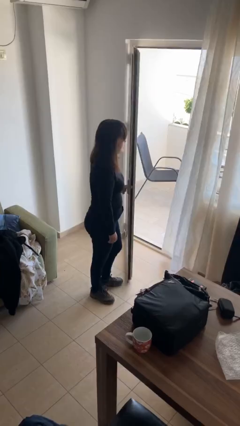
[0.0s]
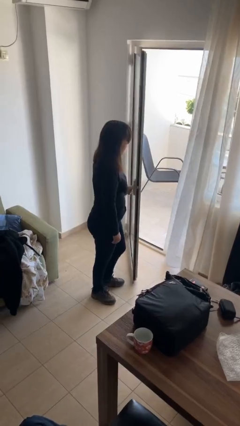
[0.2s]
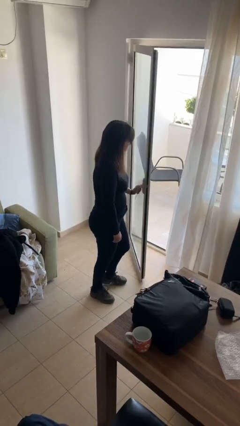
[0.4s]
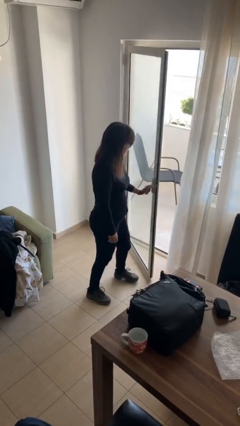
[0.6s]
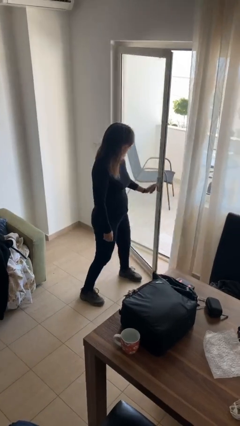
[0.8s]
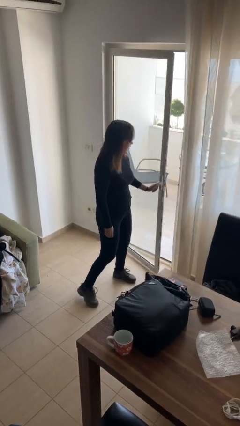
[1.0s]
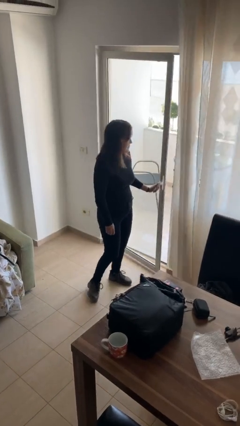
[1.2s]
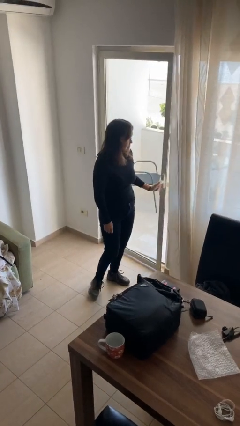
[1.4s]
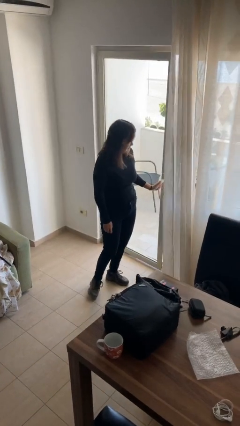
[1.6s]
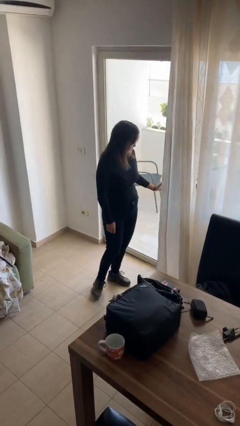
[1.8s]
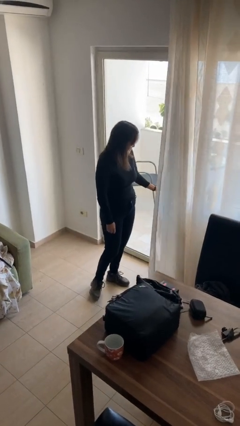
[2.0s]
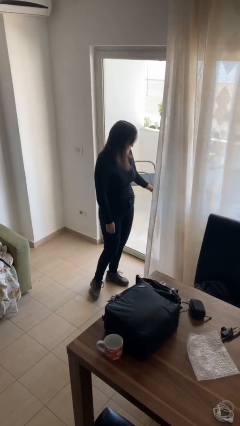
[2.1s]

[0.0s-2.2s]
person closes facility door

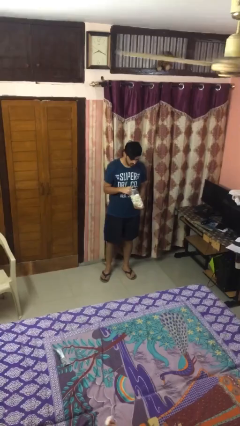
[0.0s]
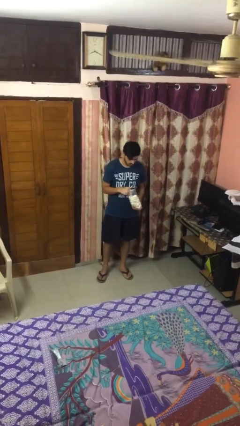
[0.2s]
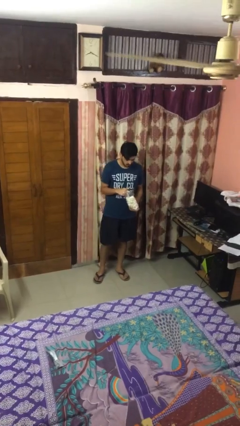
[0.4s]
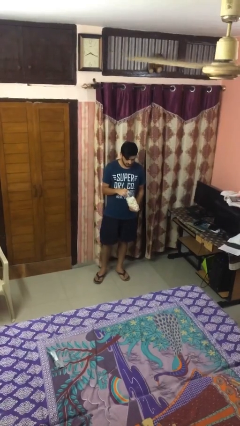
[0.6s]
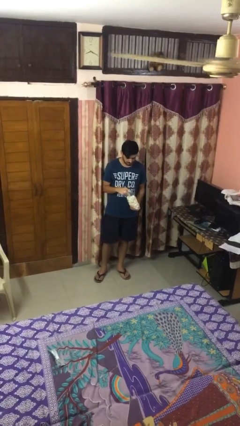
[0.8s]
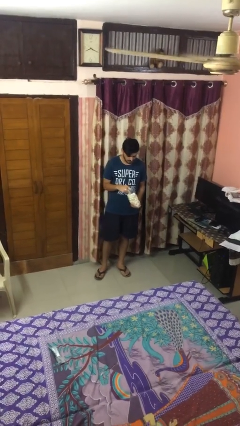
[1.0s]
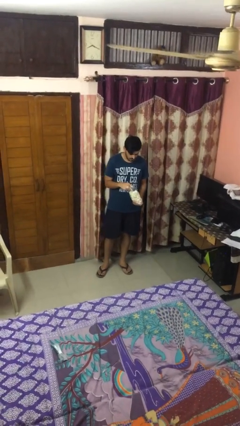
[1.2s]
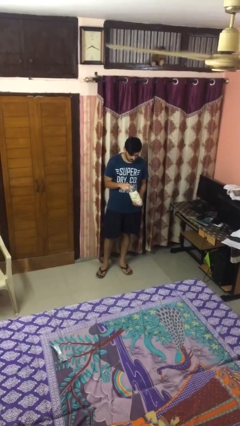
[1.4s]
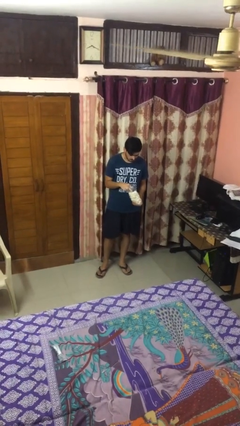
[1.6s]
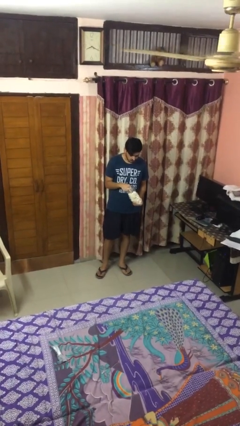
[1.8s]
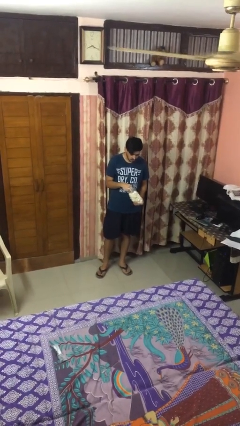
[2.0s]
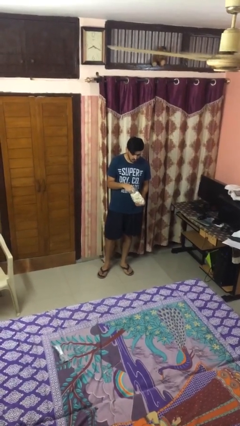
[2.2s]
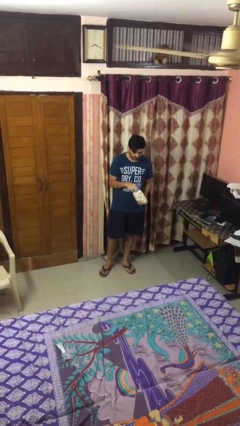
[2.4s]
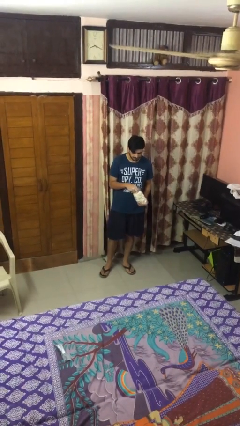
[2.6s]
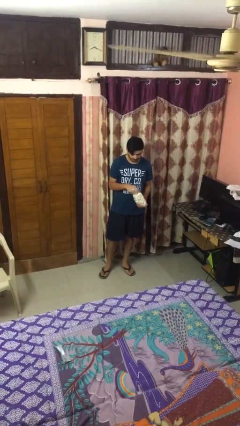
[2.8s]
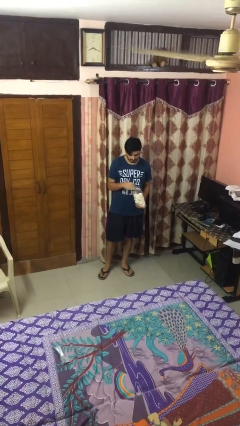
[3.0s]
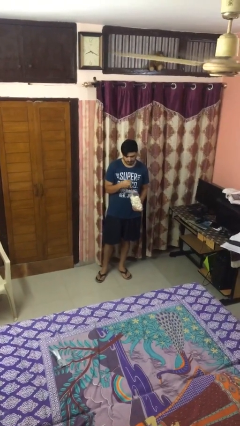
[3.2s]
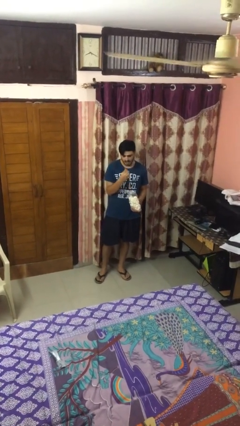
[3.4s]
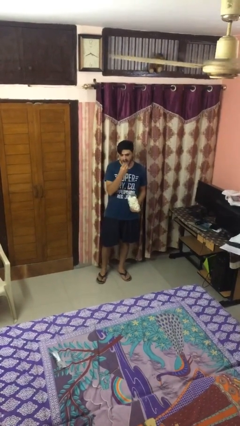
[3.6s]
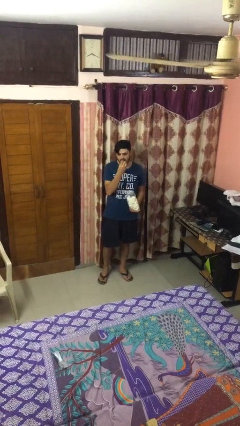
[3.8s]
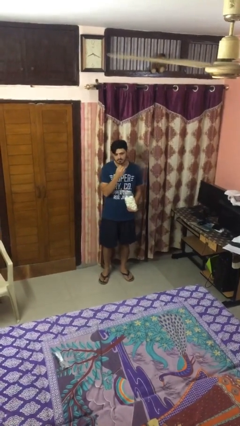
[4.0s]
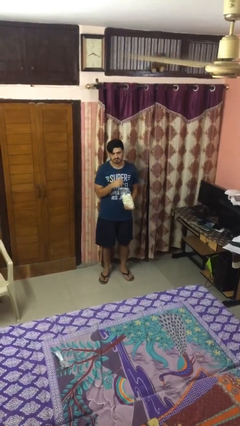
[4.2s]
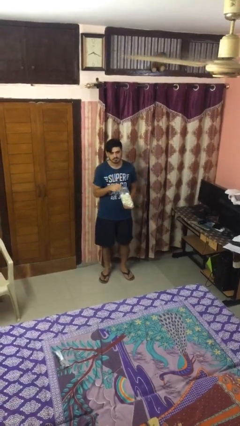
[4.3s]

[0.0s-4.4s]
person eats snack from bag

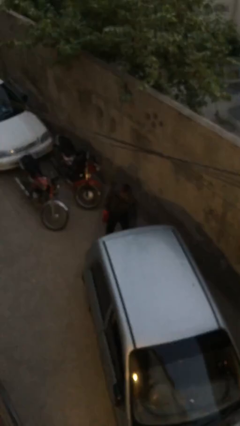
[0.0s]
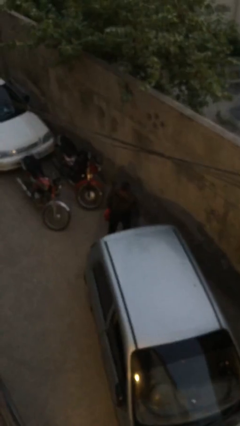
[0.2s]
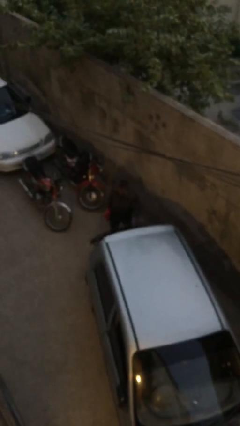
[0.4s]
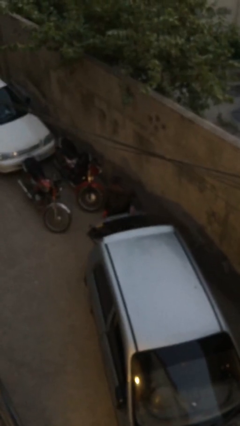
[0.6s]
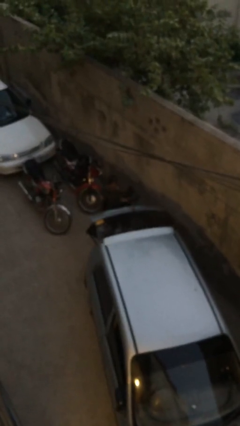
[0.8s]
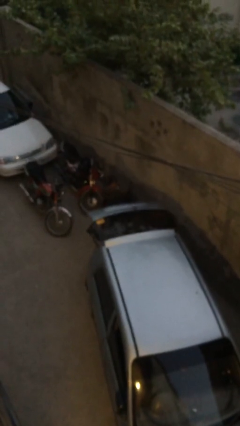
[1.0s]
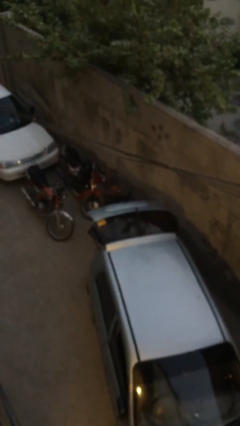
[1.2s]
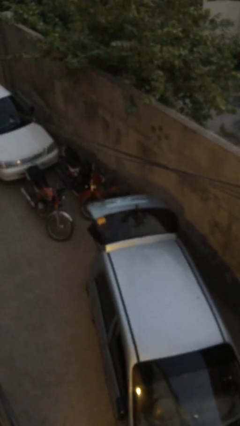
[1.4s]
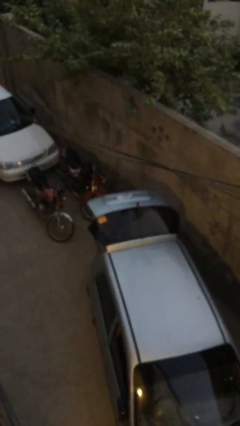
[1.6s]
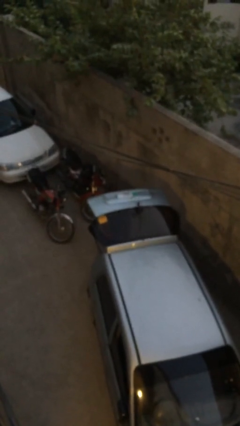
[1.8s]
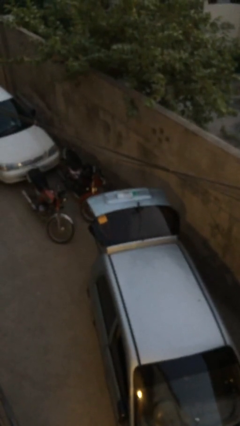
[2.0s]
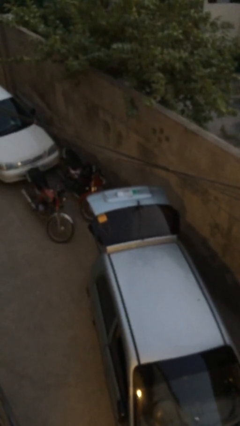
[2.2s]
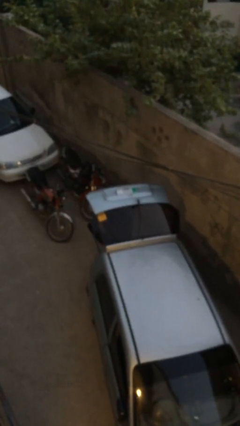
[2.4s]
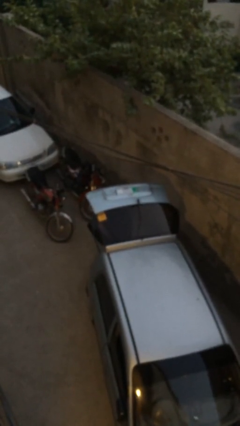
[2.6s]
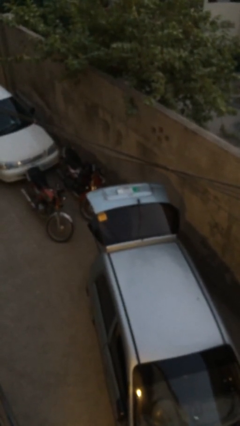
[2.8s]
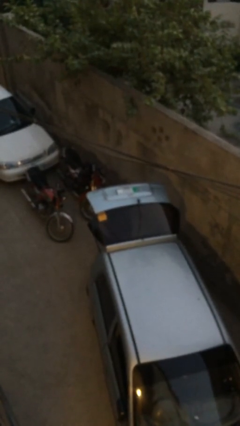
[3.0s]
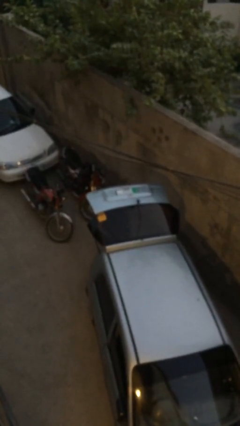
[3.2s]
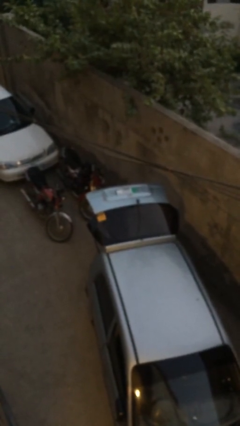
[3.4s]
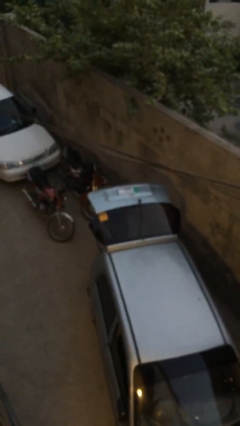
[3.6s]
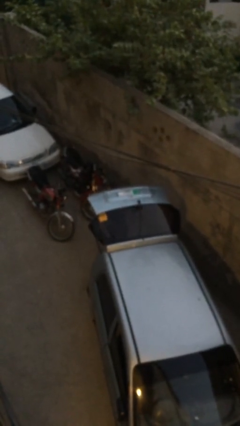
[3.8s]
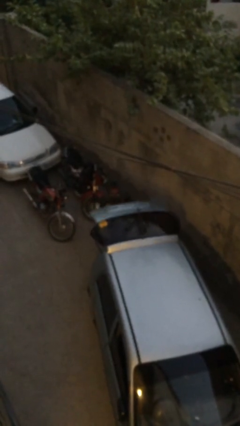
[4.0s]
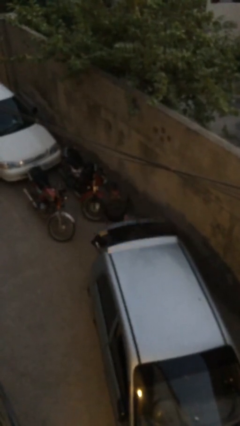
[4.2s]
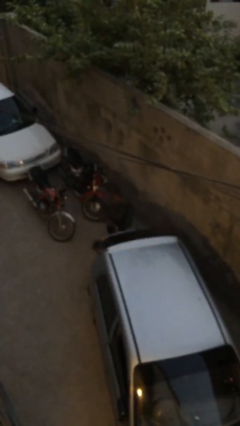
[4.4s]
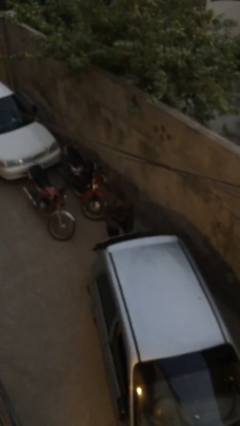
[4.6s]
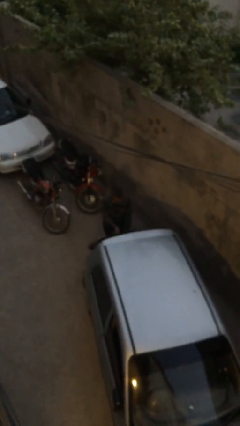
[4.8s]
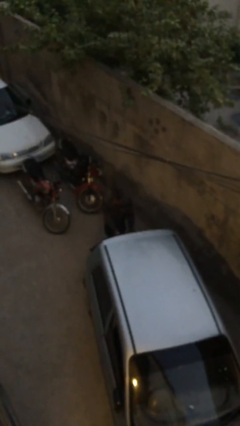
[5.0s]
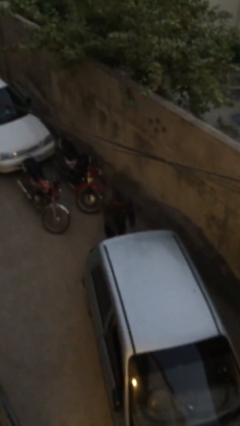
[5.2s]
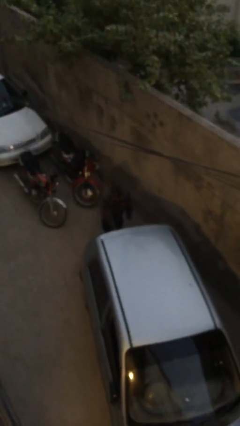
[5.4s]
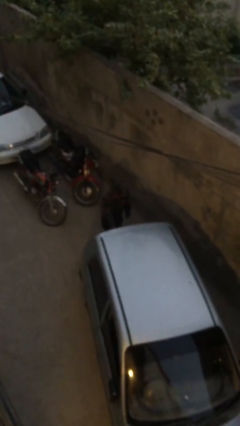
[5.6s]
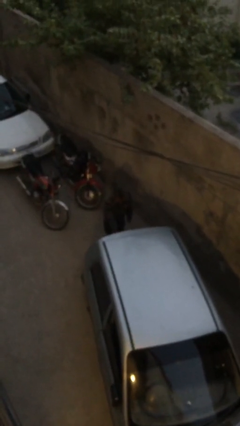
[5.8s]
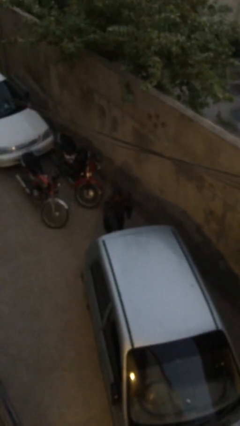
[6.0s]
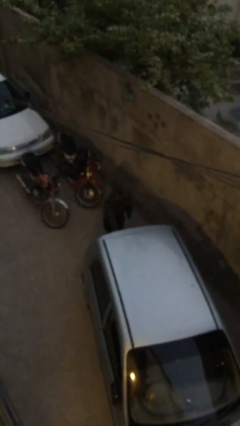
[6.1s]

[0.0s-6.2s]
person loads car

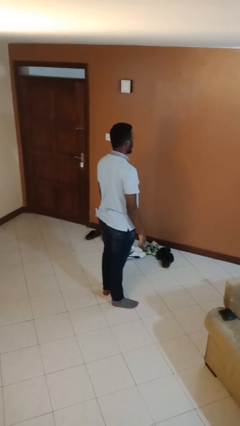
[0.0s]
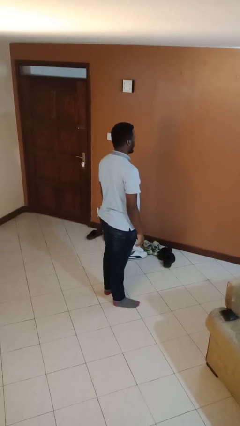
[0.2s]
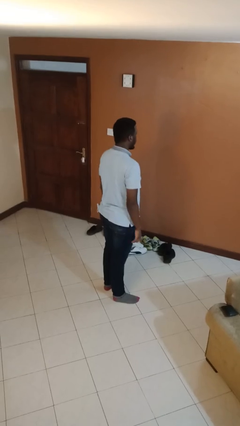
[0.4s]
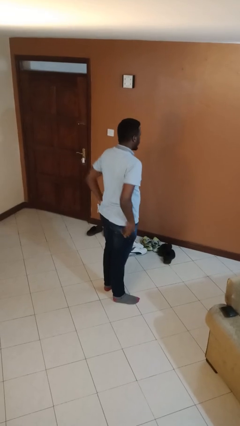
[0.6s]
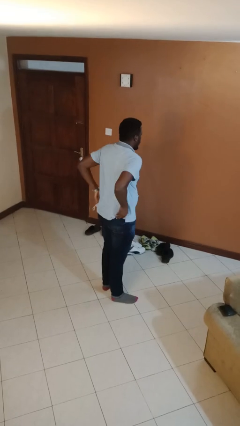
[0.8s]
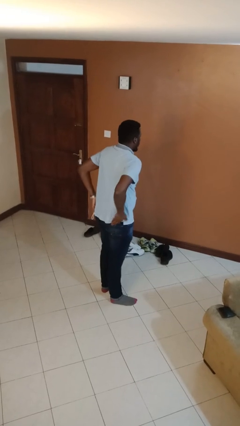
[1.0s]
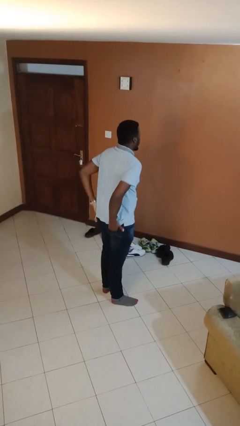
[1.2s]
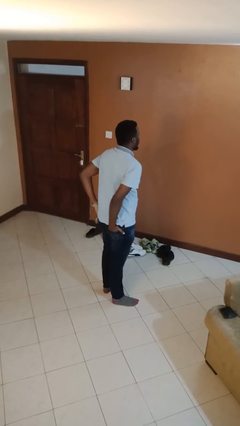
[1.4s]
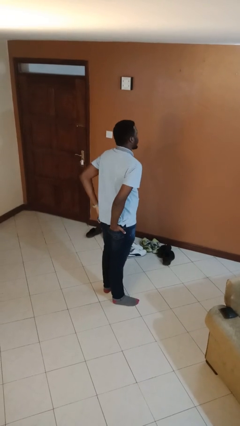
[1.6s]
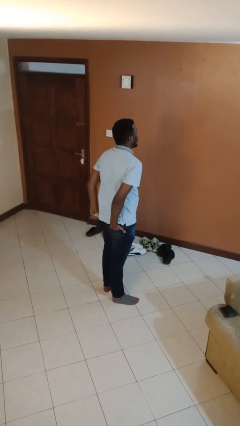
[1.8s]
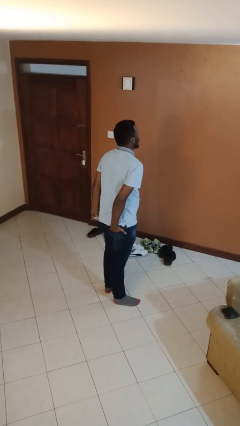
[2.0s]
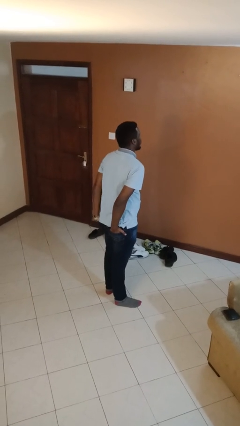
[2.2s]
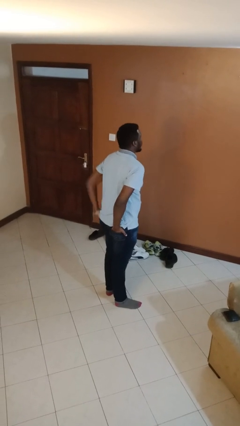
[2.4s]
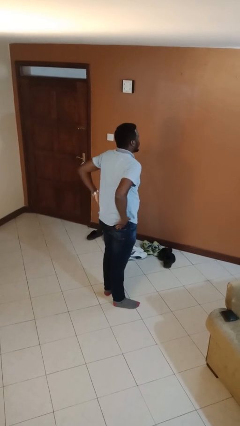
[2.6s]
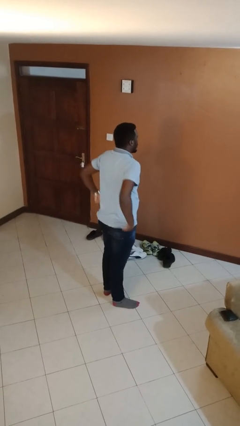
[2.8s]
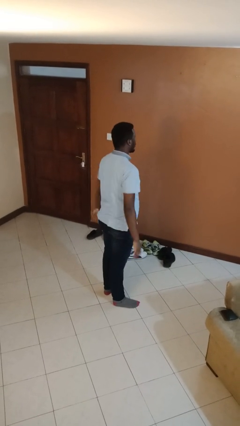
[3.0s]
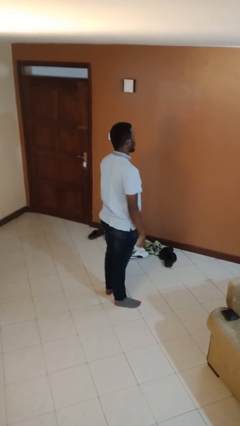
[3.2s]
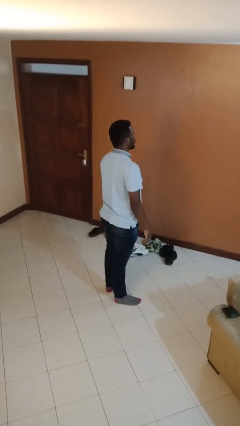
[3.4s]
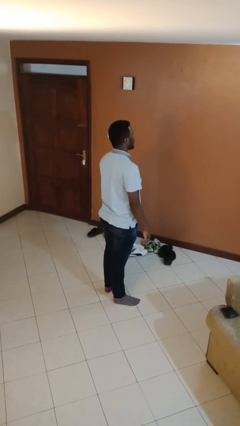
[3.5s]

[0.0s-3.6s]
person puts hands in back pockets

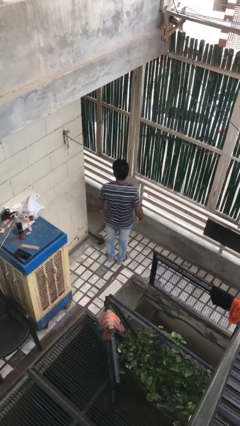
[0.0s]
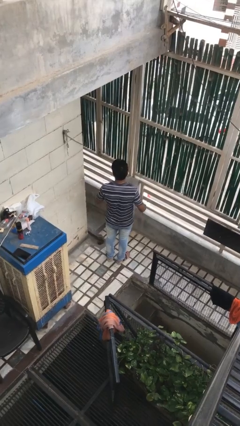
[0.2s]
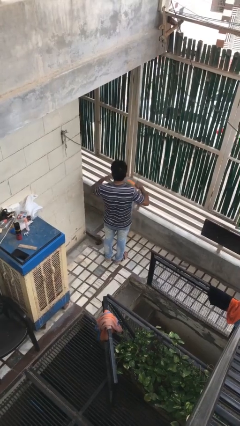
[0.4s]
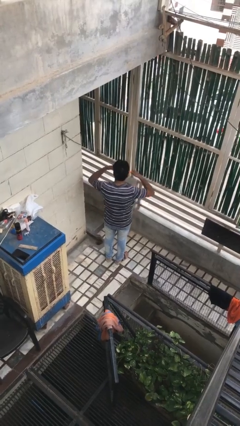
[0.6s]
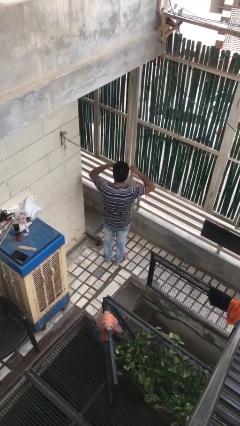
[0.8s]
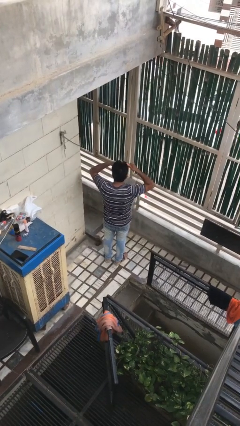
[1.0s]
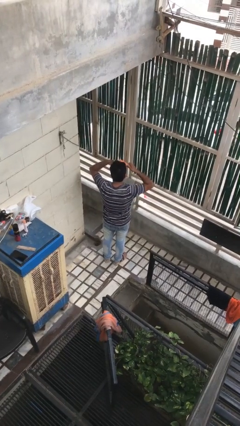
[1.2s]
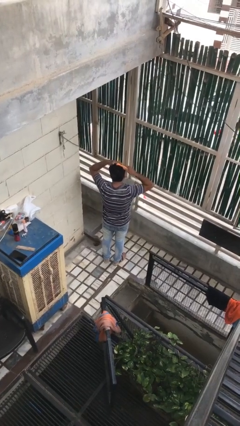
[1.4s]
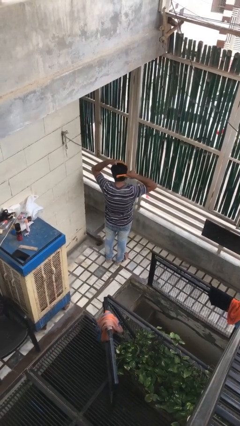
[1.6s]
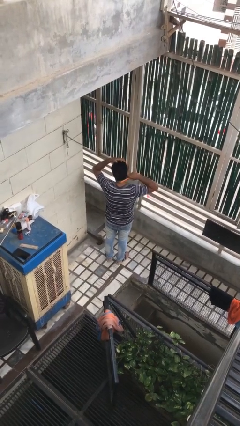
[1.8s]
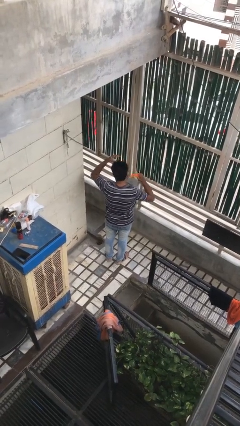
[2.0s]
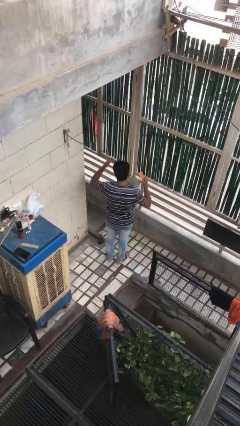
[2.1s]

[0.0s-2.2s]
person brushes hair
